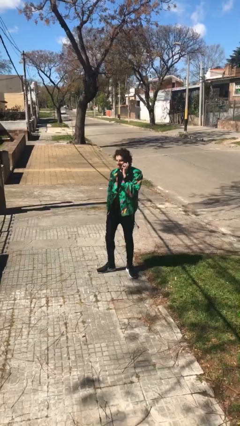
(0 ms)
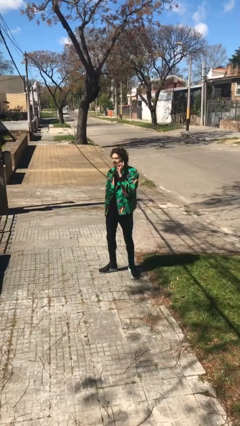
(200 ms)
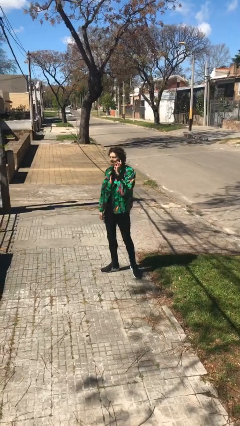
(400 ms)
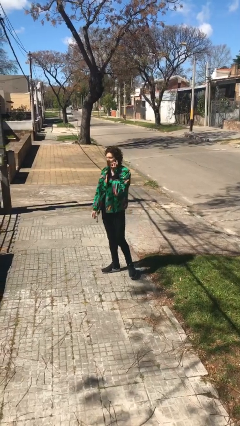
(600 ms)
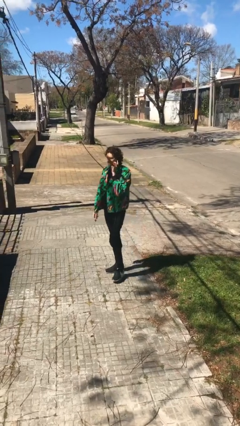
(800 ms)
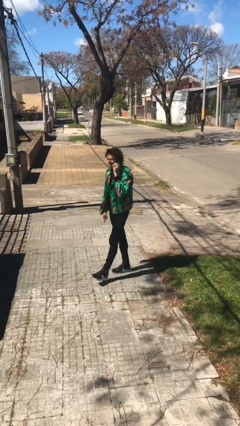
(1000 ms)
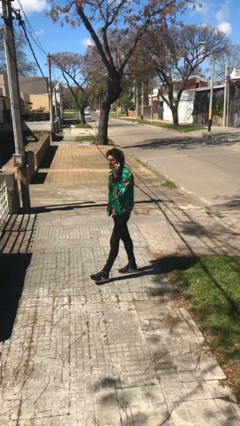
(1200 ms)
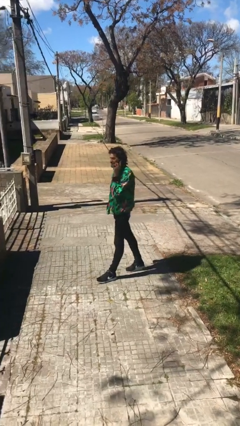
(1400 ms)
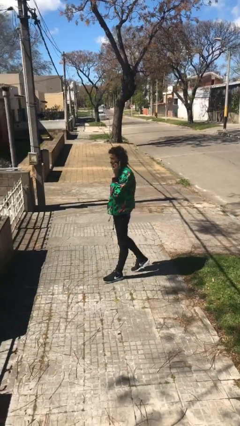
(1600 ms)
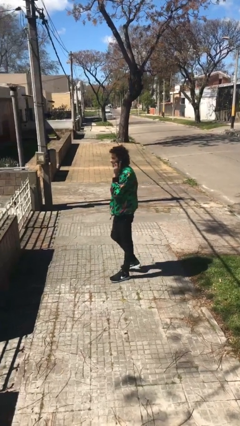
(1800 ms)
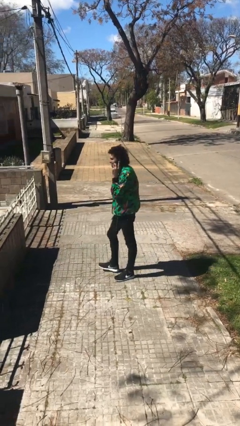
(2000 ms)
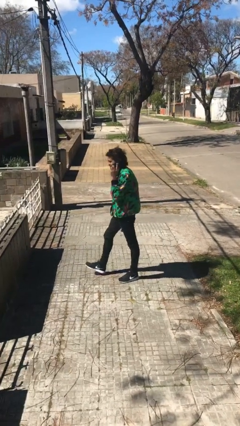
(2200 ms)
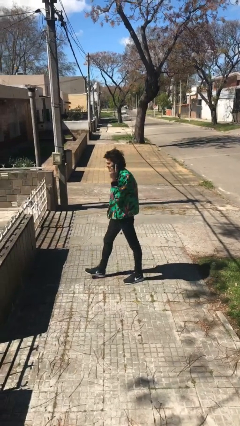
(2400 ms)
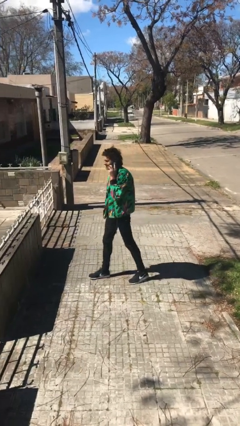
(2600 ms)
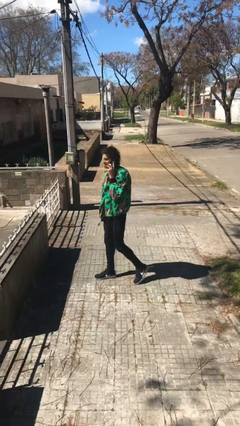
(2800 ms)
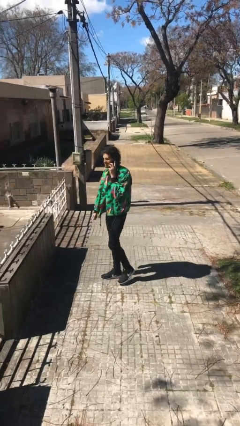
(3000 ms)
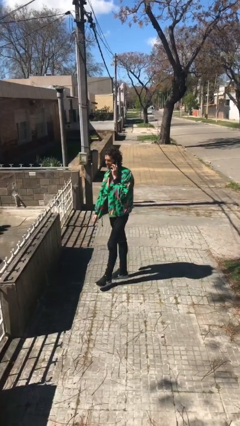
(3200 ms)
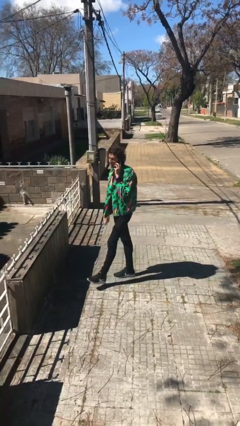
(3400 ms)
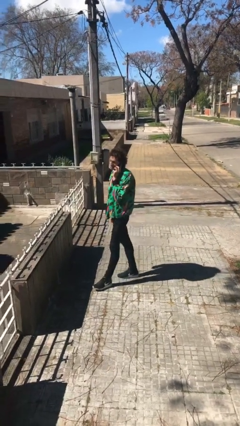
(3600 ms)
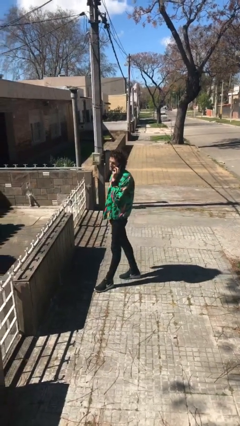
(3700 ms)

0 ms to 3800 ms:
person talks on phone

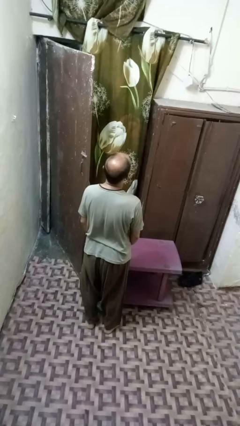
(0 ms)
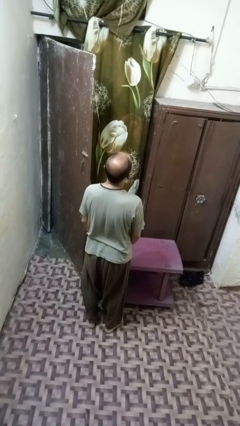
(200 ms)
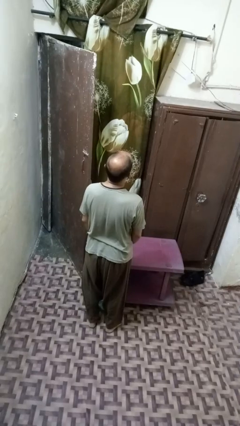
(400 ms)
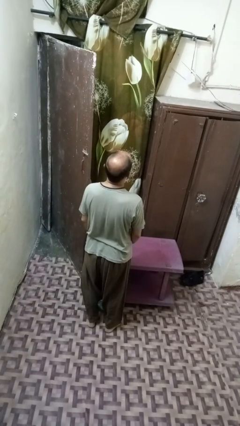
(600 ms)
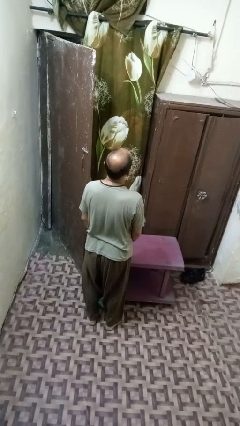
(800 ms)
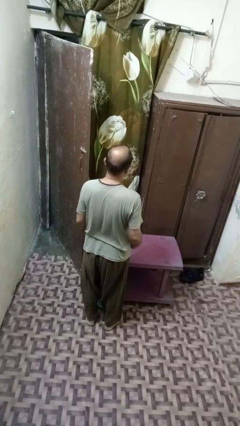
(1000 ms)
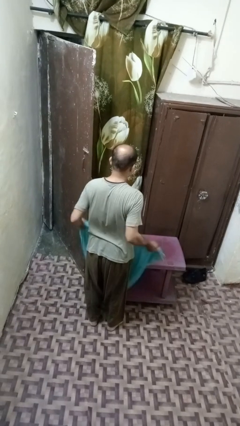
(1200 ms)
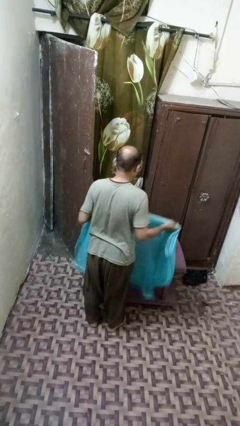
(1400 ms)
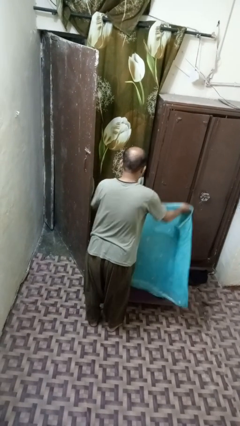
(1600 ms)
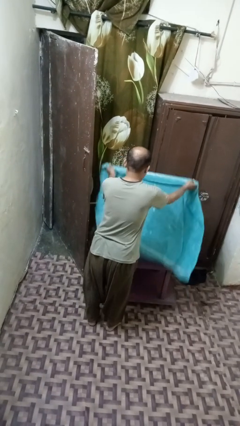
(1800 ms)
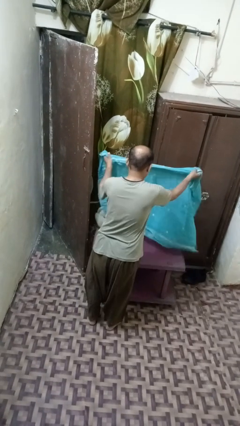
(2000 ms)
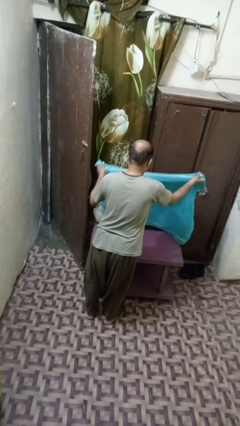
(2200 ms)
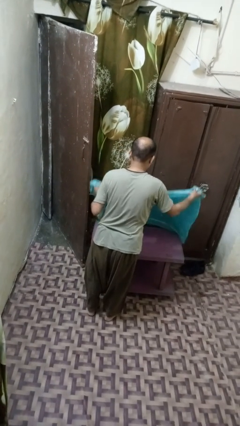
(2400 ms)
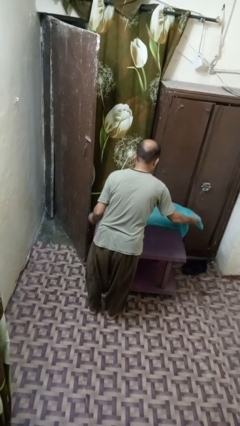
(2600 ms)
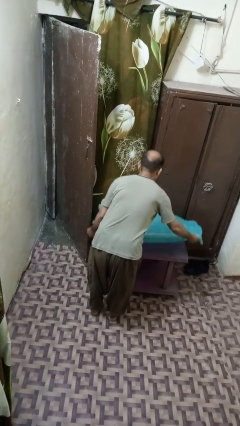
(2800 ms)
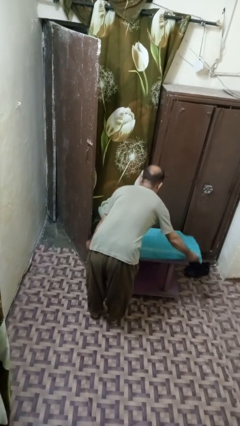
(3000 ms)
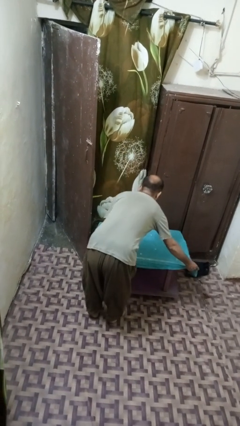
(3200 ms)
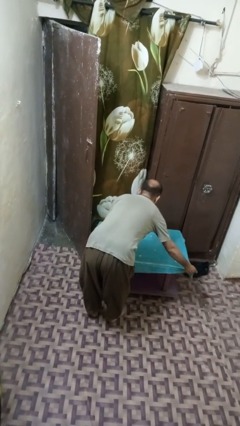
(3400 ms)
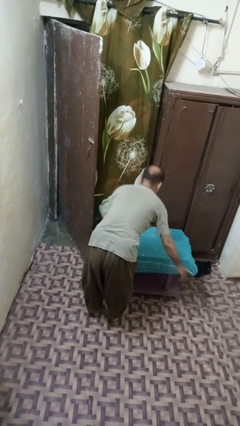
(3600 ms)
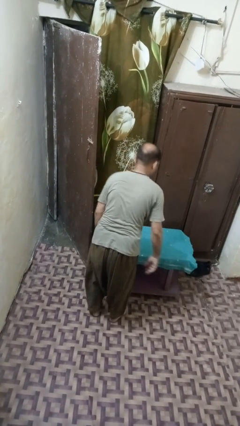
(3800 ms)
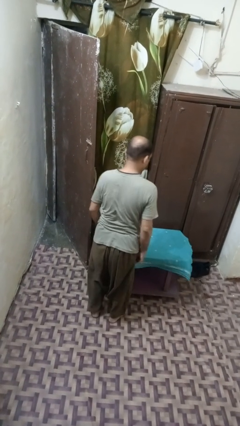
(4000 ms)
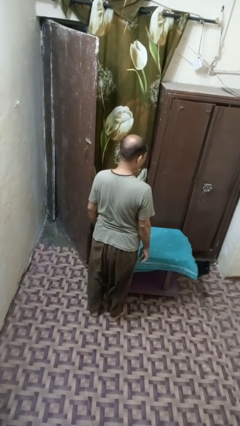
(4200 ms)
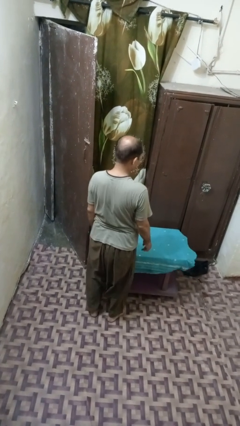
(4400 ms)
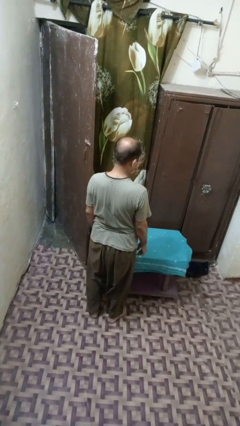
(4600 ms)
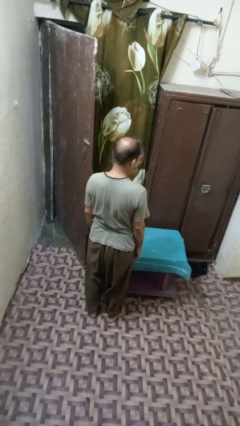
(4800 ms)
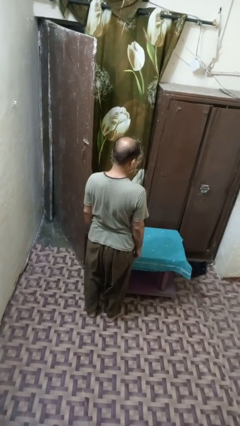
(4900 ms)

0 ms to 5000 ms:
person spreads tablecloth

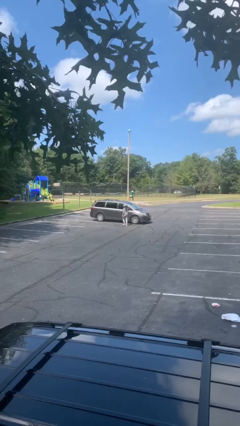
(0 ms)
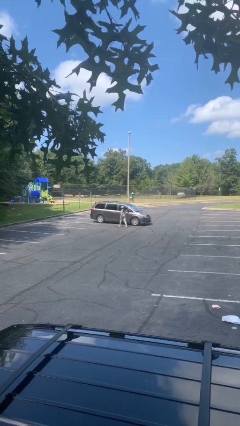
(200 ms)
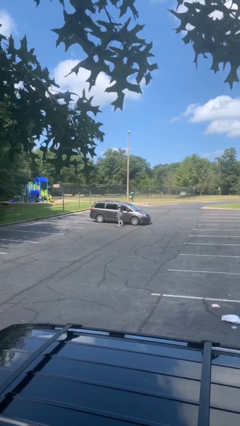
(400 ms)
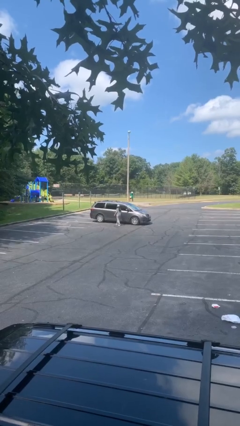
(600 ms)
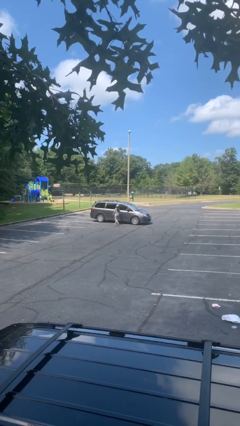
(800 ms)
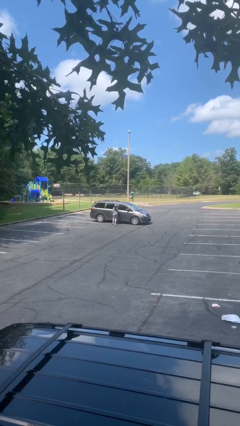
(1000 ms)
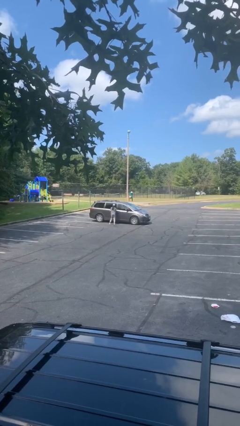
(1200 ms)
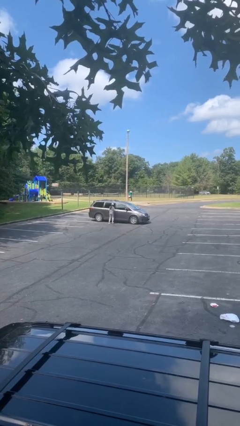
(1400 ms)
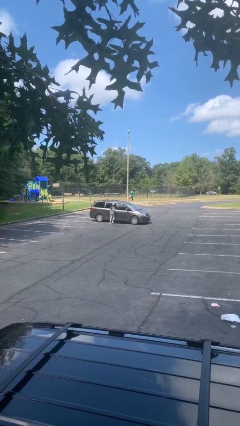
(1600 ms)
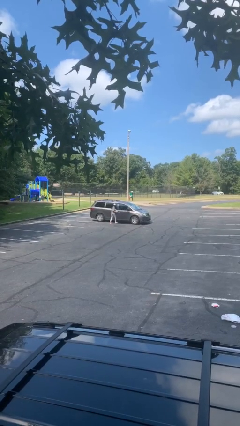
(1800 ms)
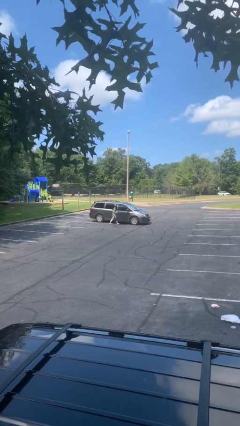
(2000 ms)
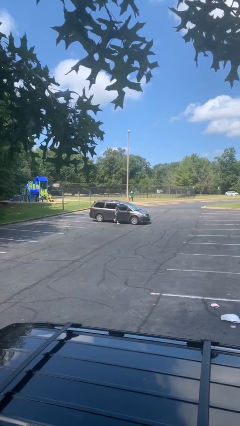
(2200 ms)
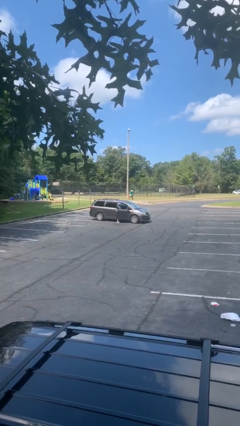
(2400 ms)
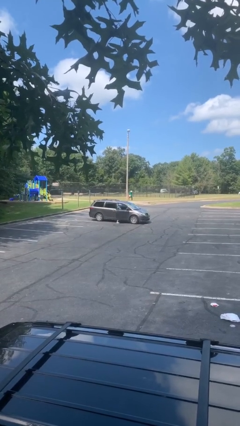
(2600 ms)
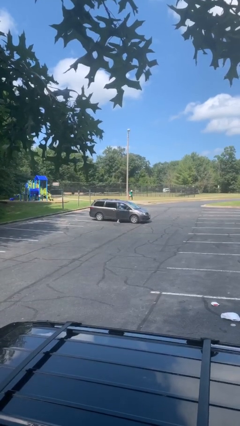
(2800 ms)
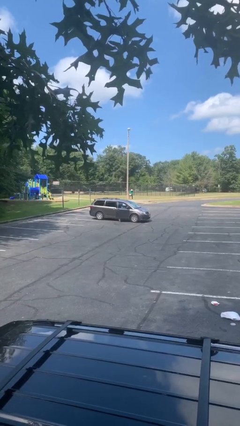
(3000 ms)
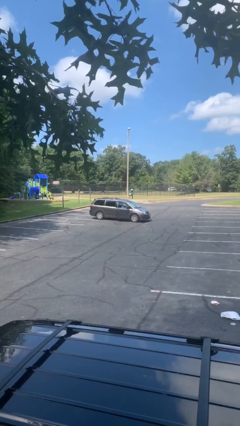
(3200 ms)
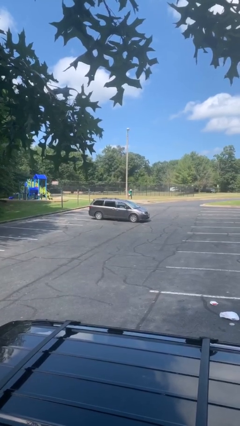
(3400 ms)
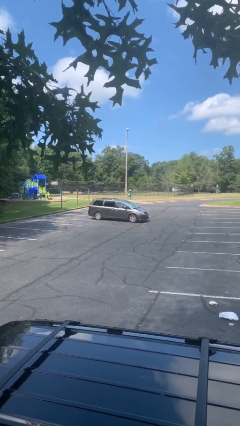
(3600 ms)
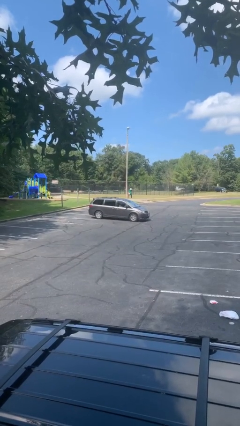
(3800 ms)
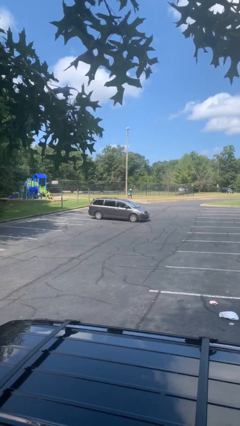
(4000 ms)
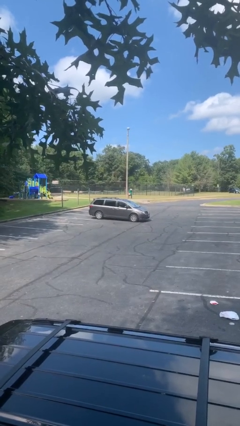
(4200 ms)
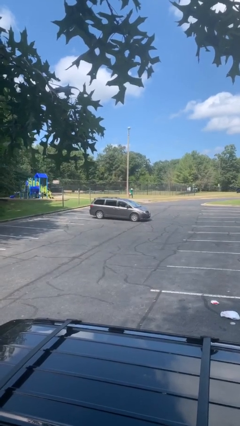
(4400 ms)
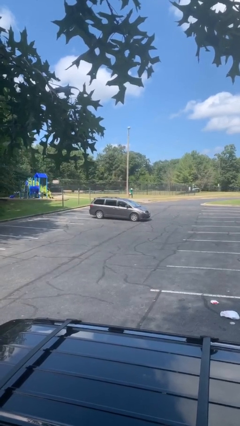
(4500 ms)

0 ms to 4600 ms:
car picks up person

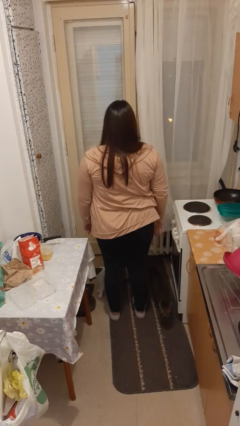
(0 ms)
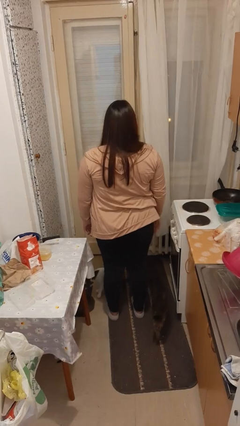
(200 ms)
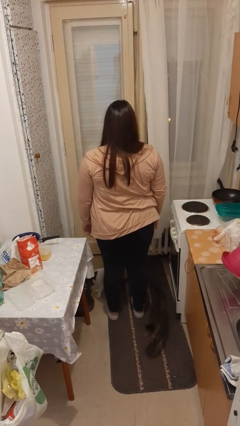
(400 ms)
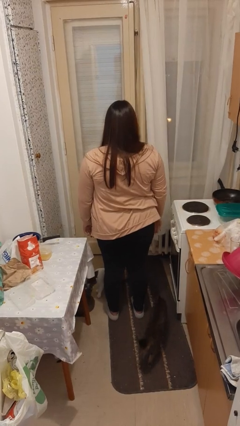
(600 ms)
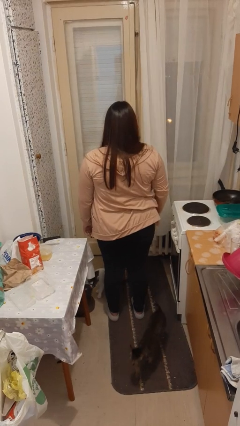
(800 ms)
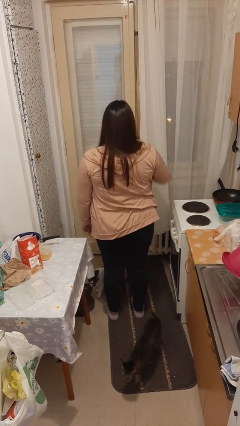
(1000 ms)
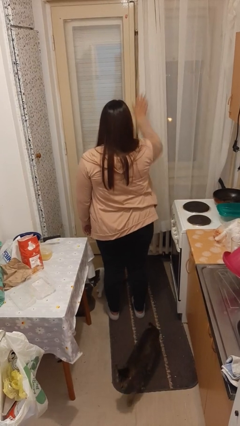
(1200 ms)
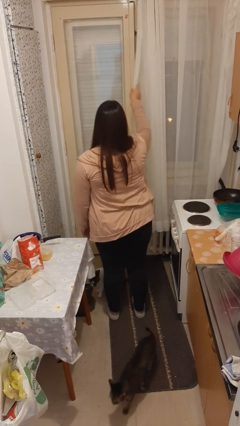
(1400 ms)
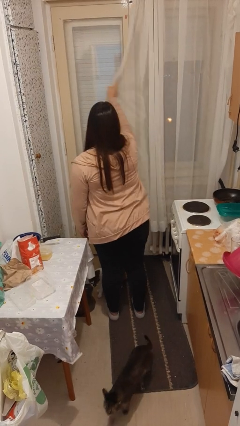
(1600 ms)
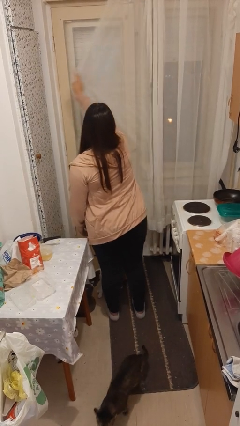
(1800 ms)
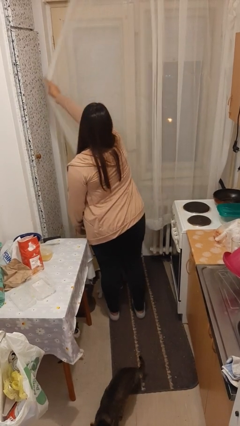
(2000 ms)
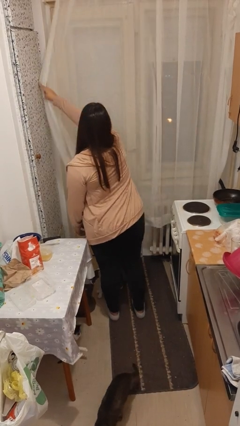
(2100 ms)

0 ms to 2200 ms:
person closes curtains

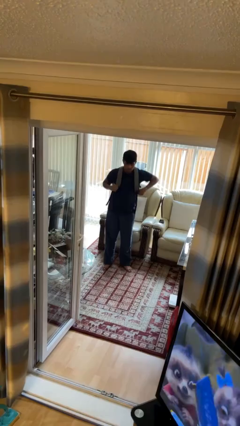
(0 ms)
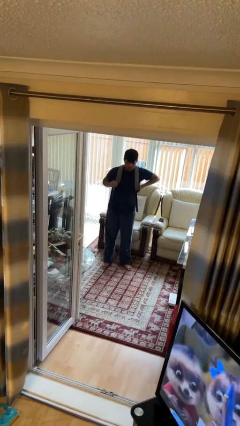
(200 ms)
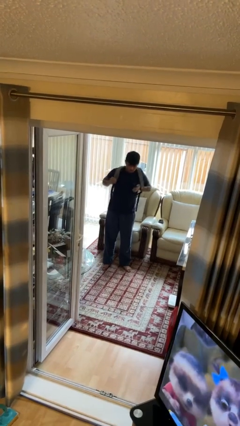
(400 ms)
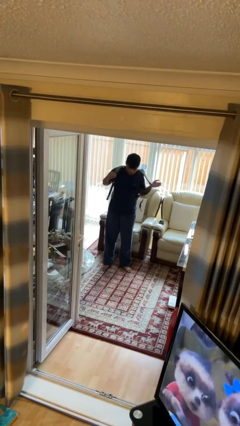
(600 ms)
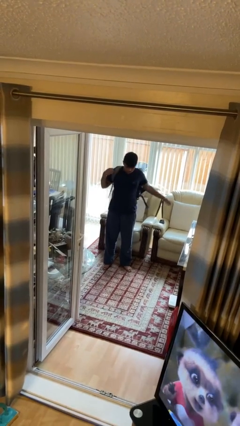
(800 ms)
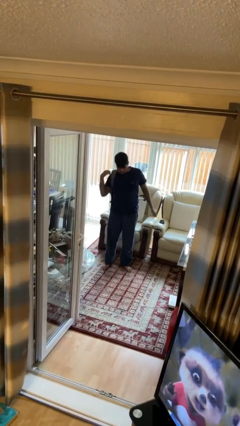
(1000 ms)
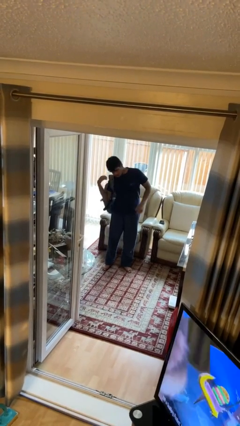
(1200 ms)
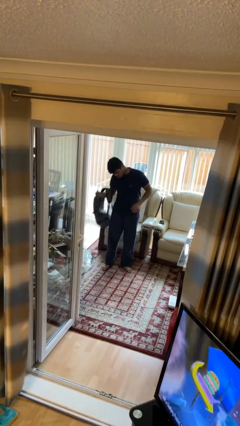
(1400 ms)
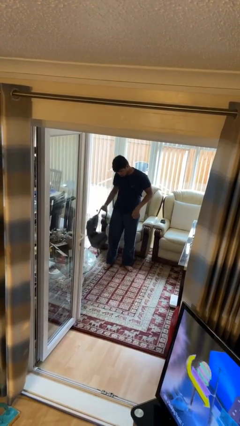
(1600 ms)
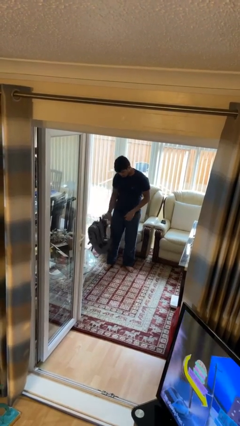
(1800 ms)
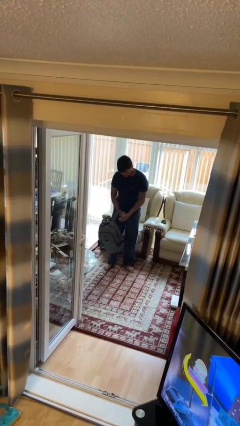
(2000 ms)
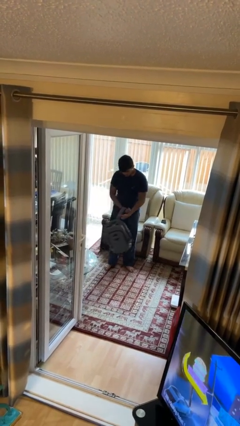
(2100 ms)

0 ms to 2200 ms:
person takes off backpack
